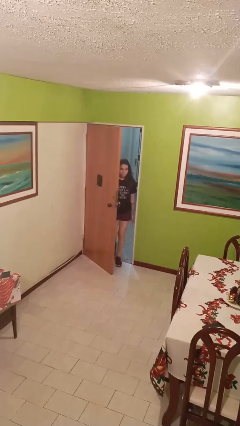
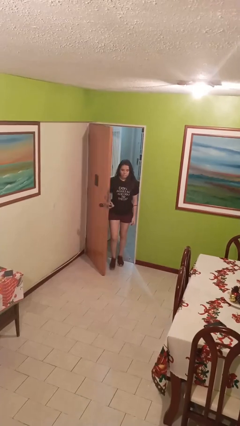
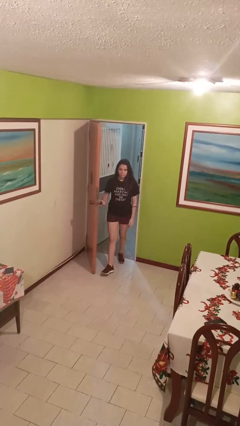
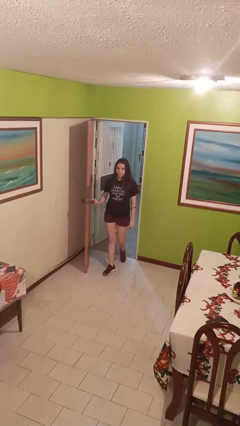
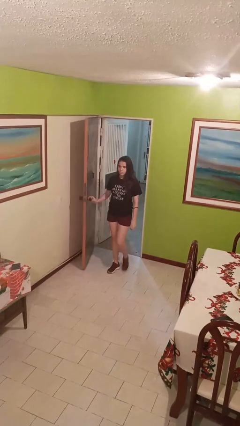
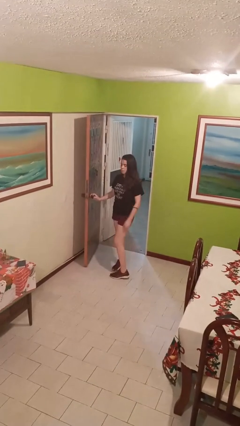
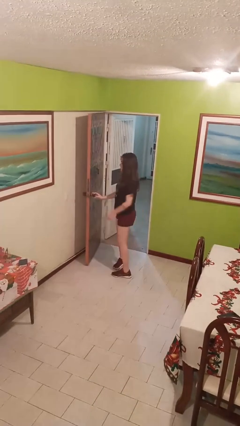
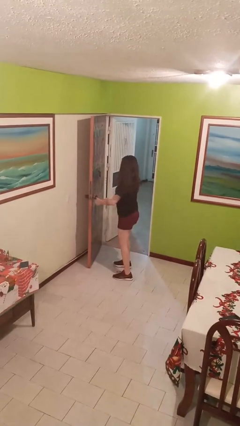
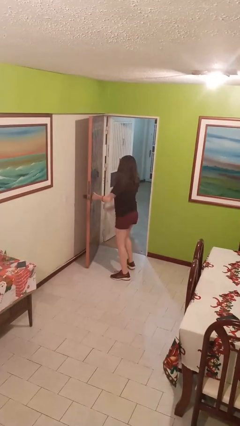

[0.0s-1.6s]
person opens facility door

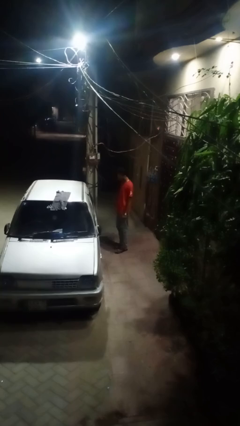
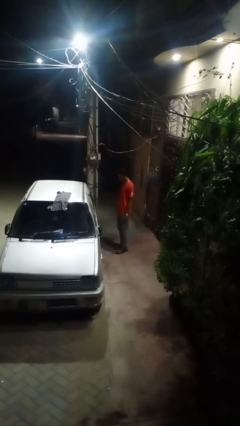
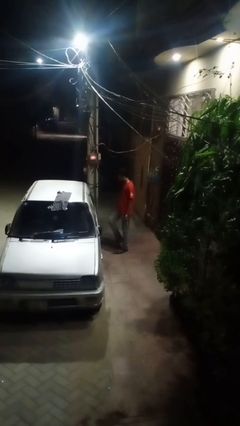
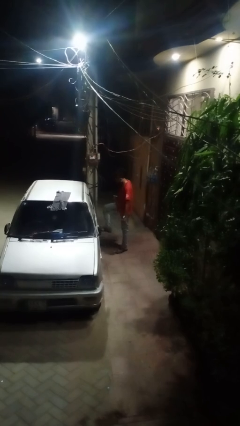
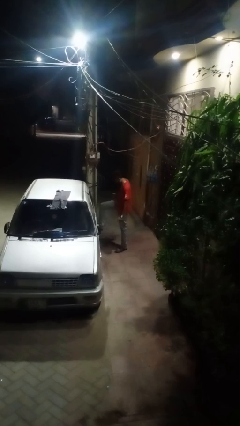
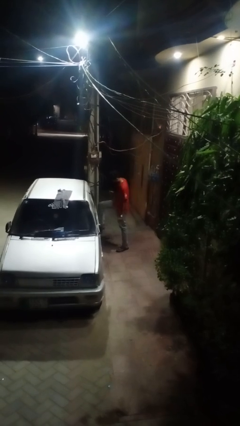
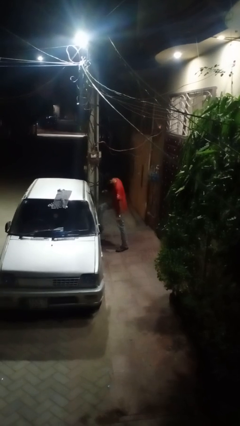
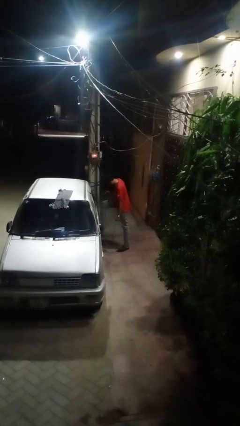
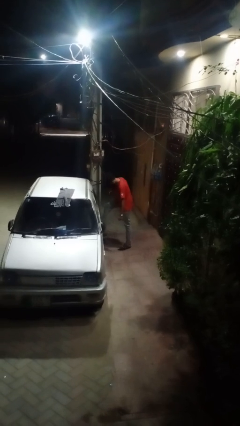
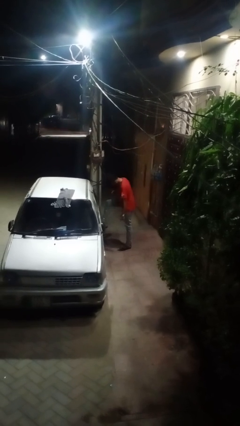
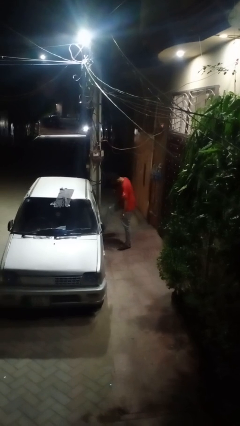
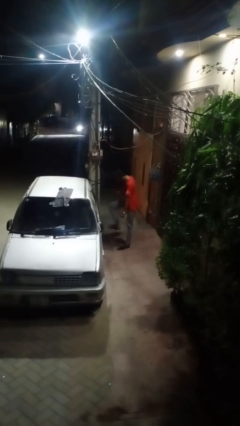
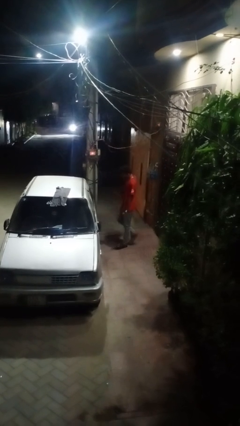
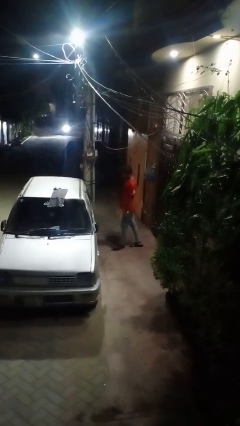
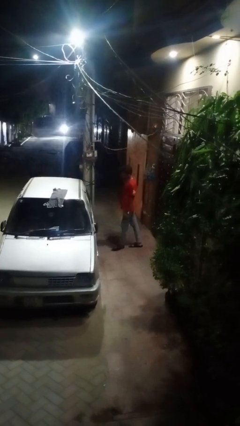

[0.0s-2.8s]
person kicks car tires

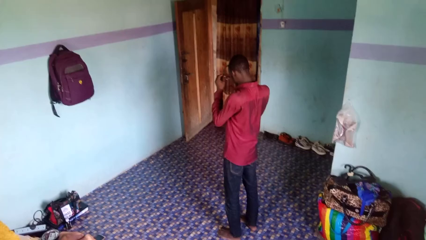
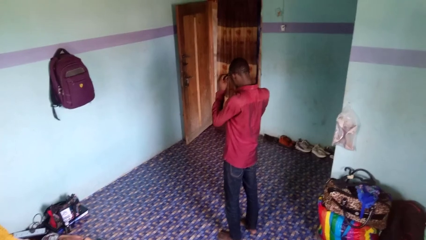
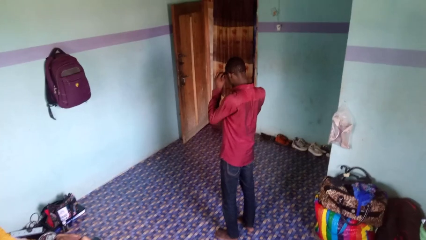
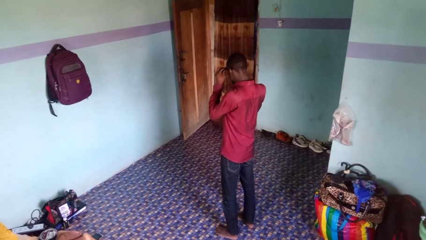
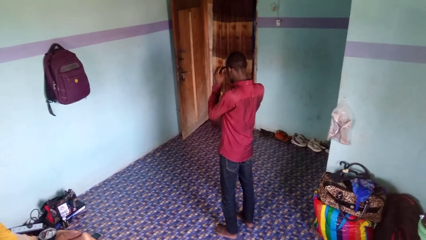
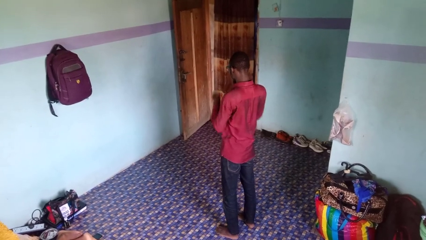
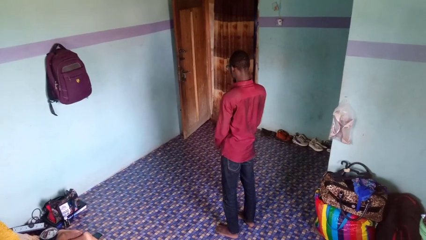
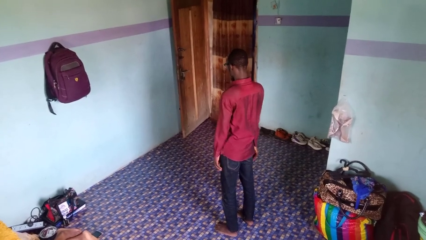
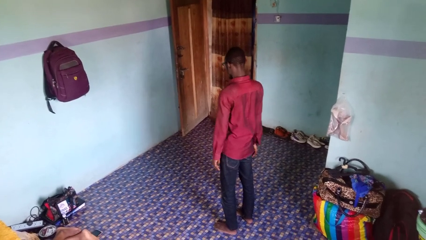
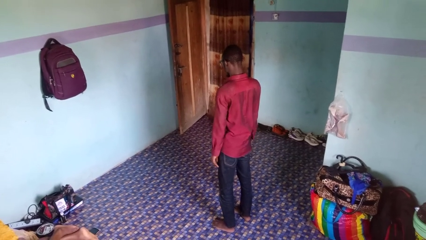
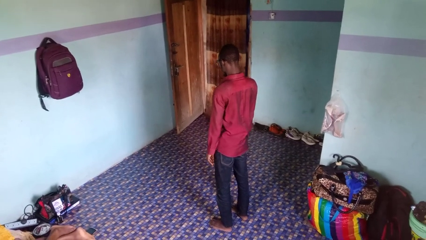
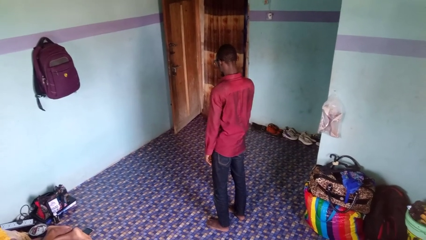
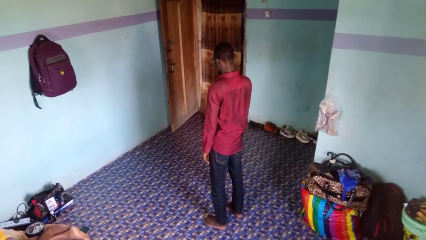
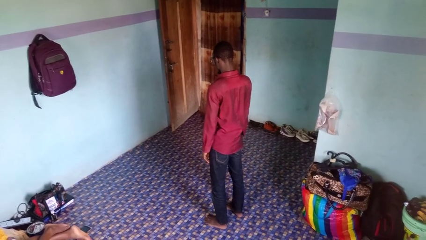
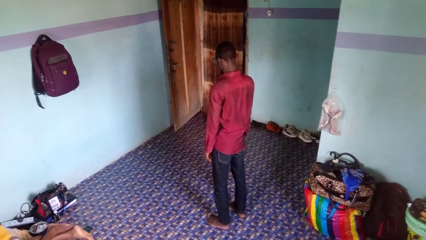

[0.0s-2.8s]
person puts on glasses

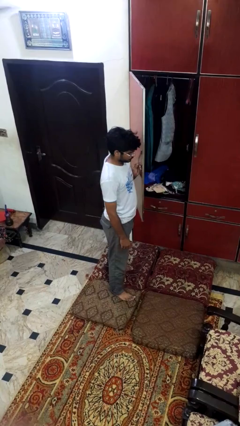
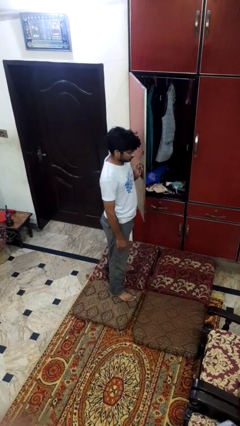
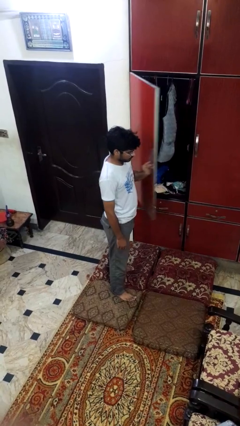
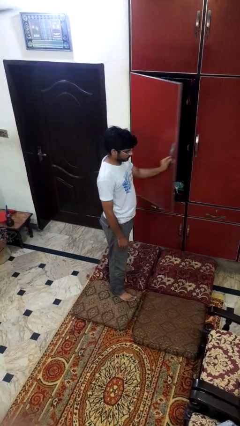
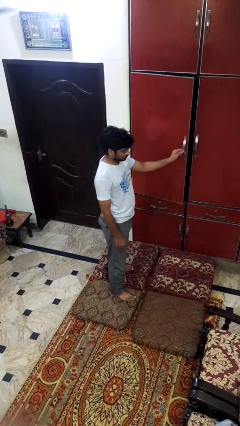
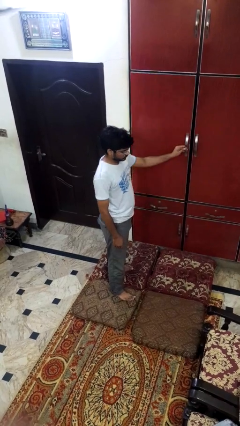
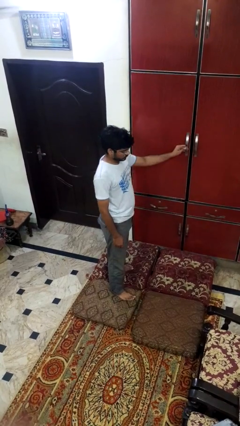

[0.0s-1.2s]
person closes closet door

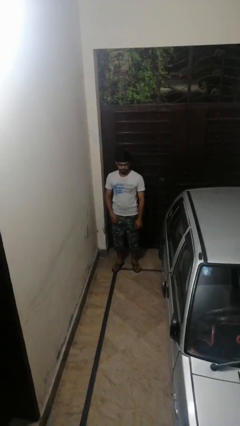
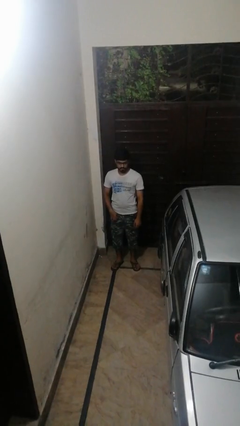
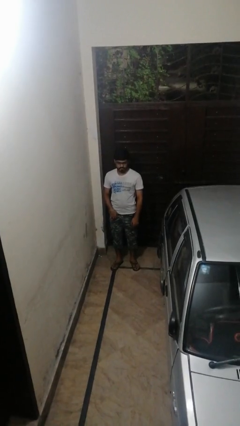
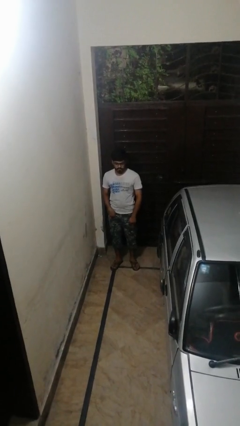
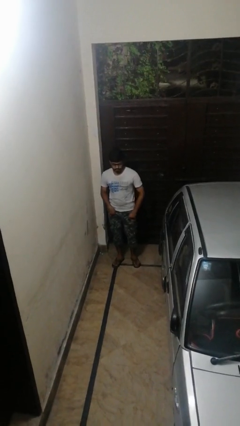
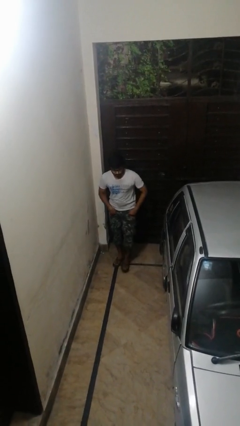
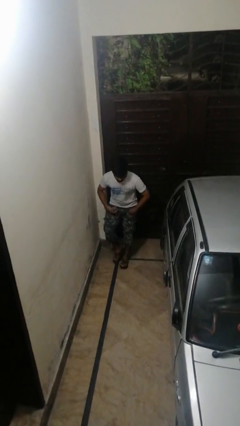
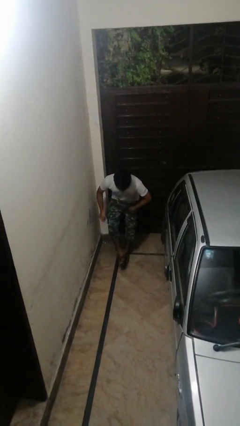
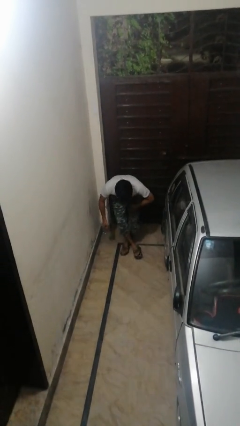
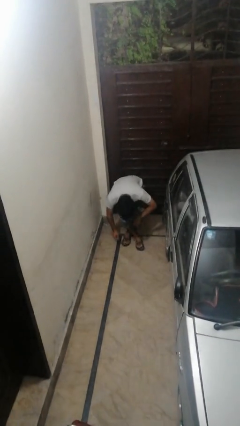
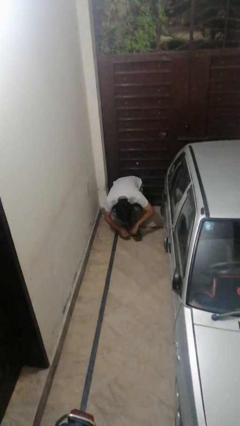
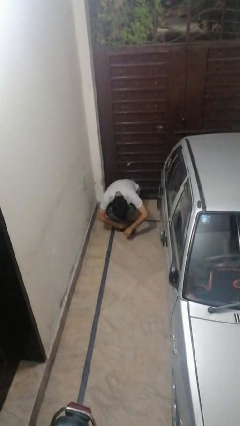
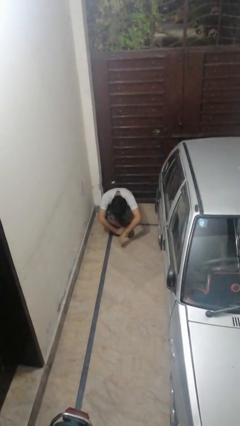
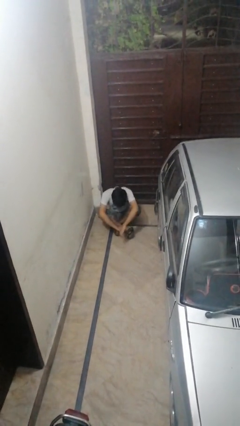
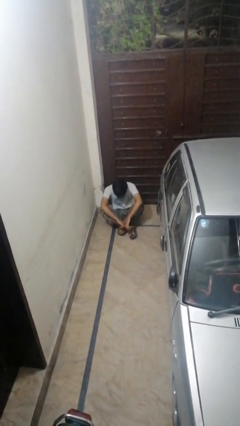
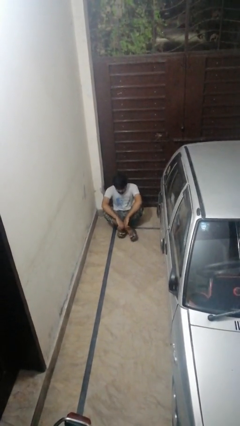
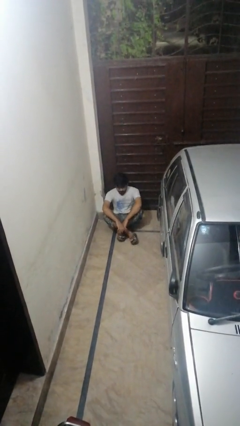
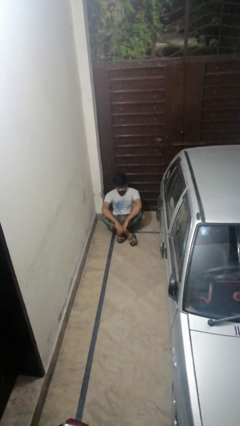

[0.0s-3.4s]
person sits crisscross

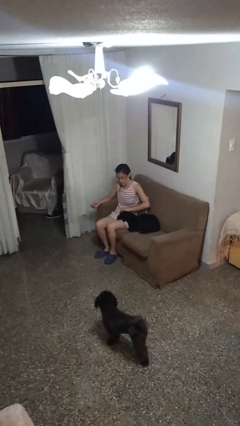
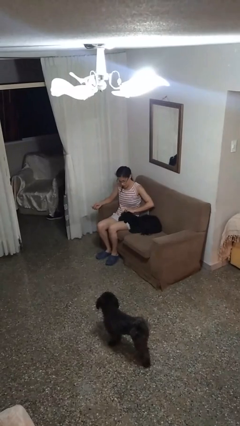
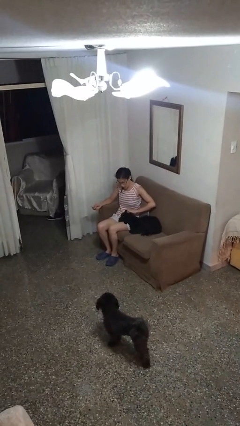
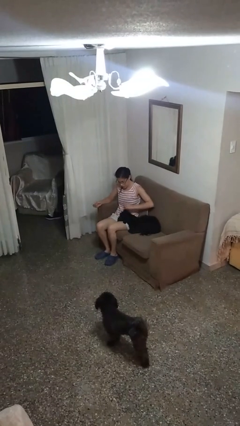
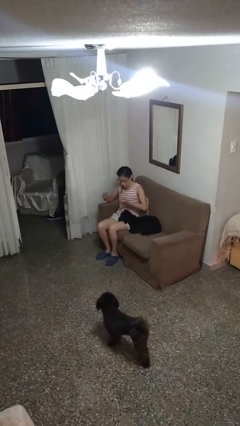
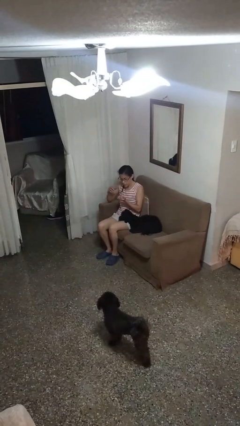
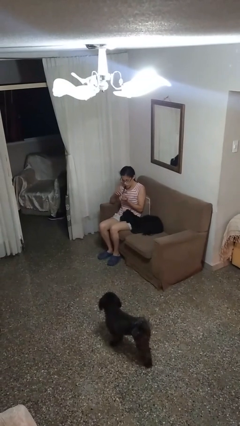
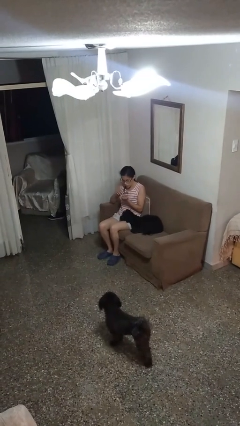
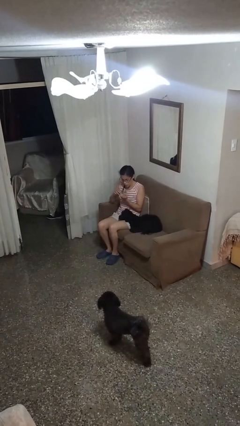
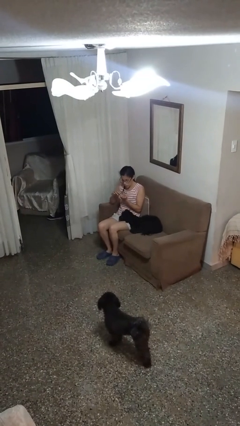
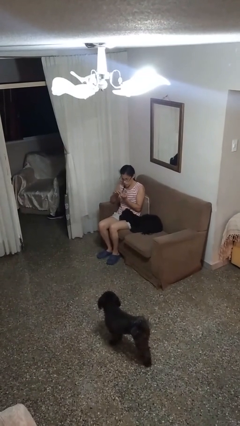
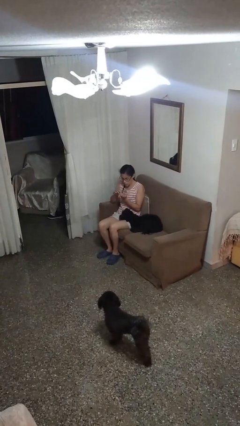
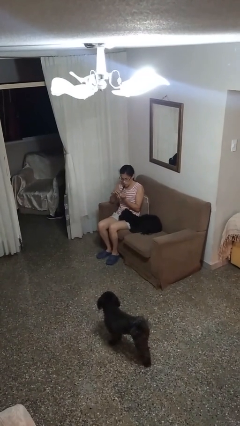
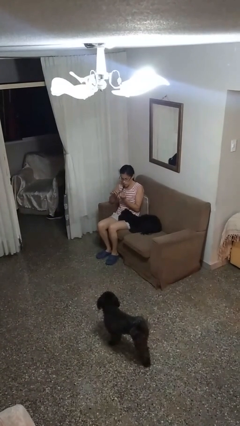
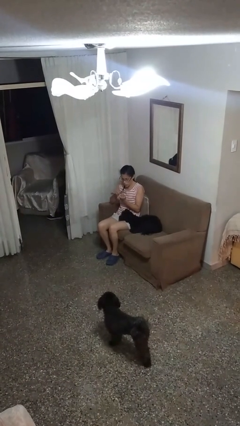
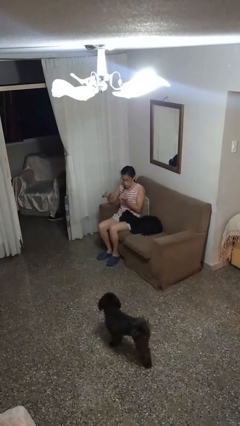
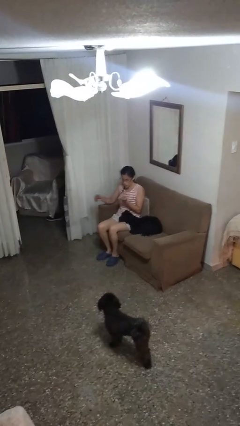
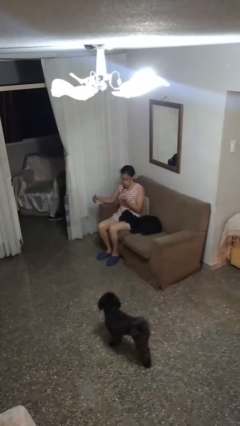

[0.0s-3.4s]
person files fingernails

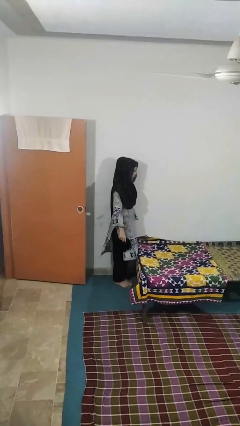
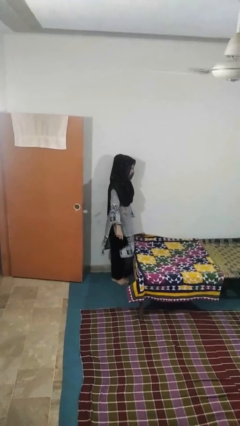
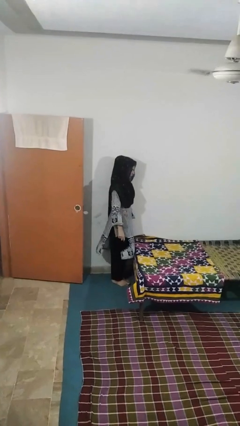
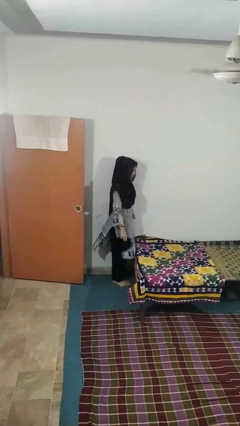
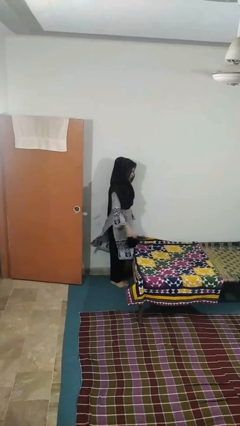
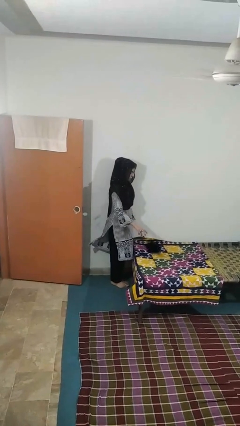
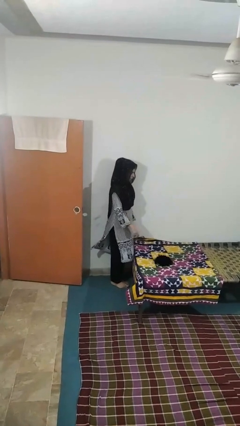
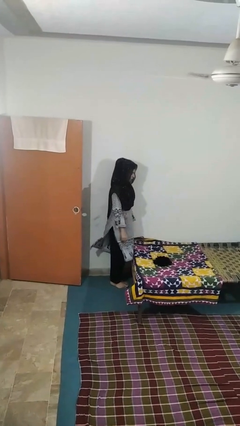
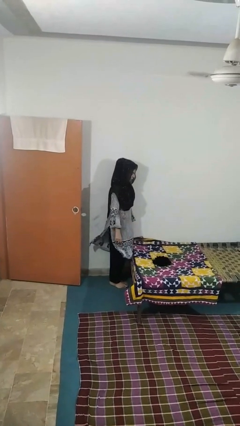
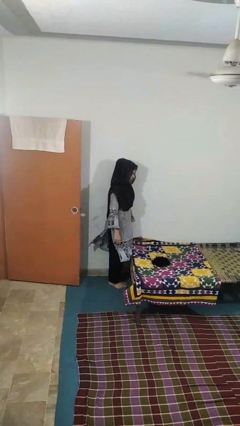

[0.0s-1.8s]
person throws object on bed
